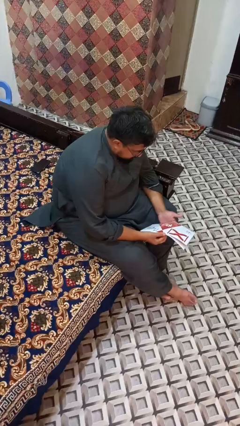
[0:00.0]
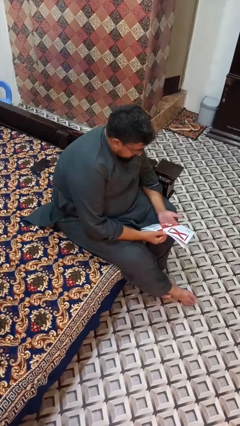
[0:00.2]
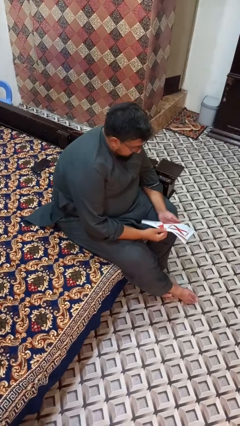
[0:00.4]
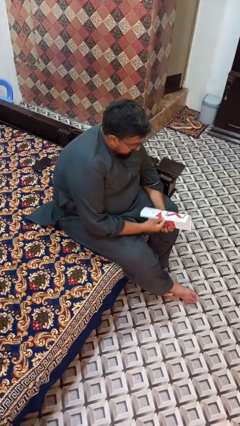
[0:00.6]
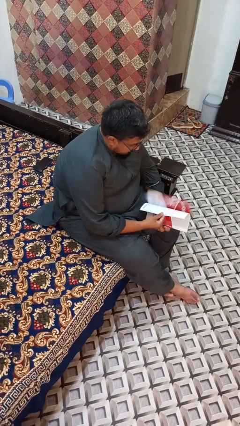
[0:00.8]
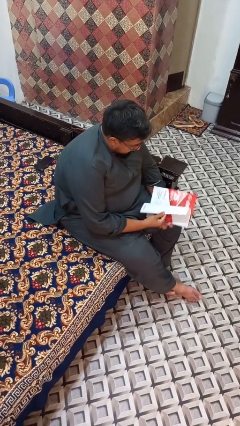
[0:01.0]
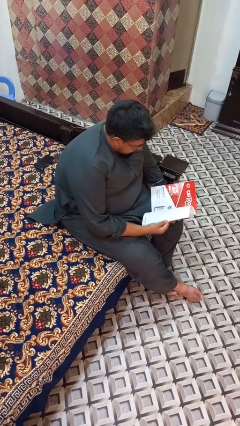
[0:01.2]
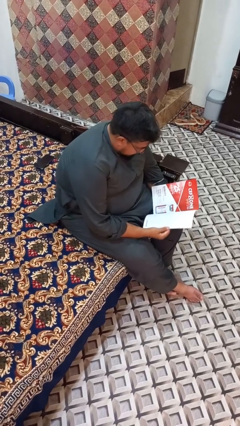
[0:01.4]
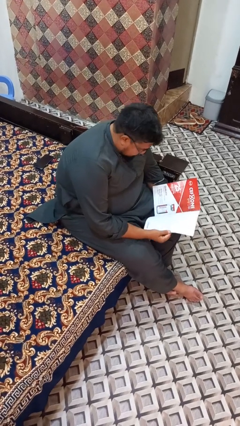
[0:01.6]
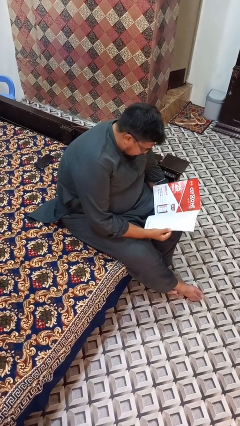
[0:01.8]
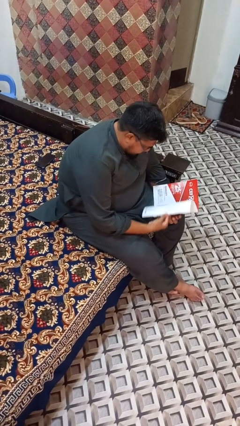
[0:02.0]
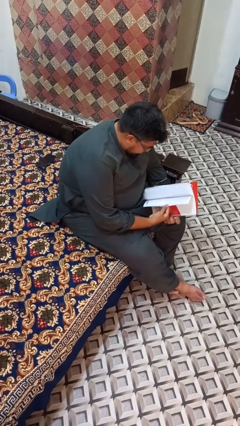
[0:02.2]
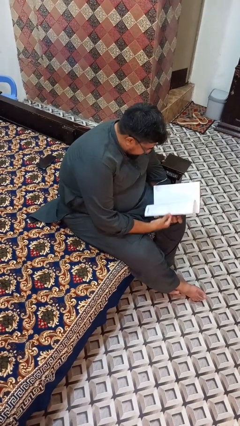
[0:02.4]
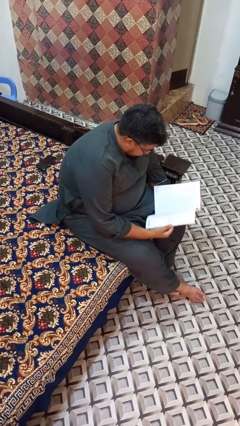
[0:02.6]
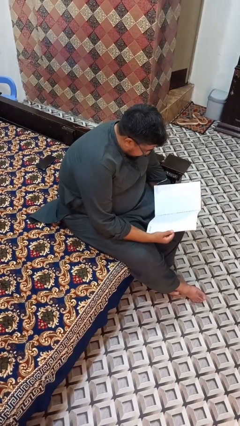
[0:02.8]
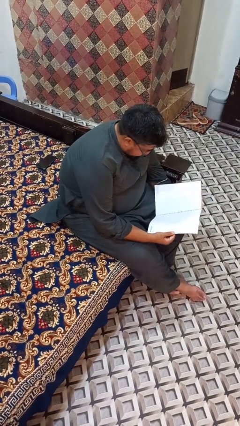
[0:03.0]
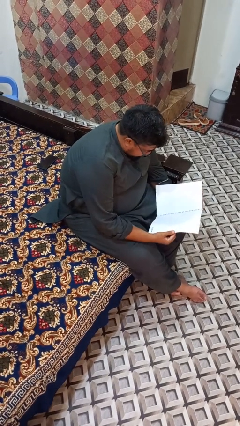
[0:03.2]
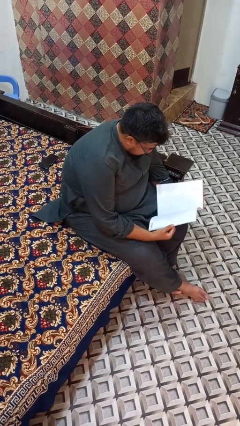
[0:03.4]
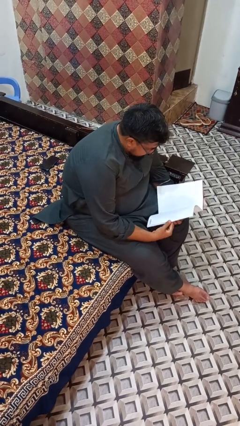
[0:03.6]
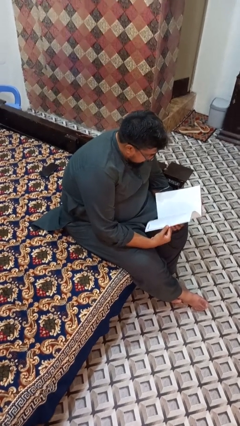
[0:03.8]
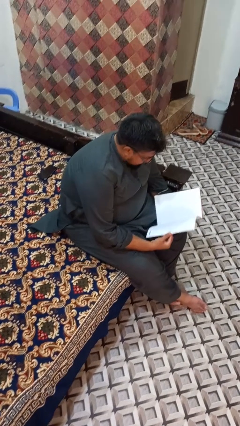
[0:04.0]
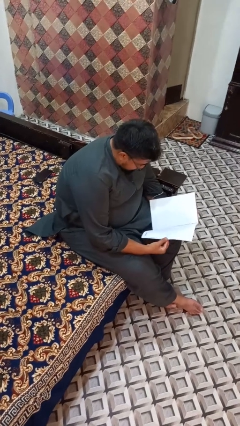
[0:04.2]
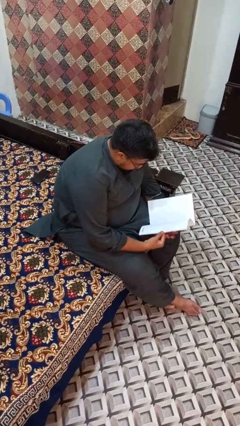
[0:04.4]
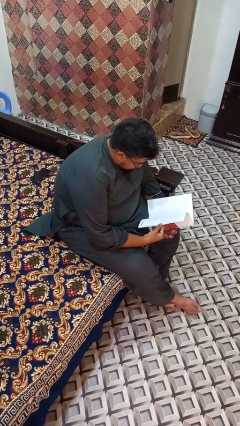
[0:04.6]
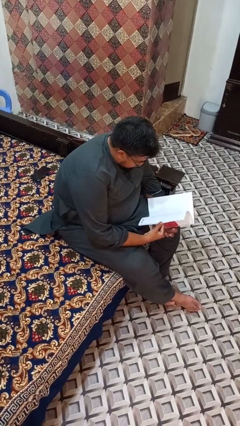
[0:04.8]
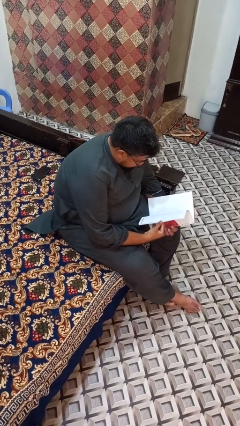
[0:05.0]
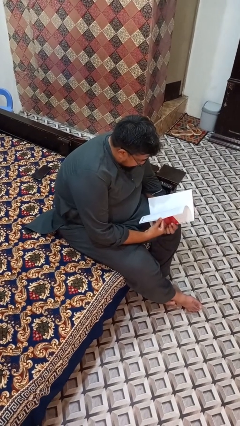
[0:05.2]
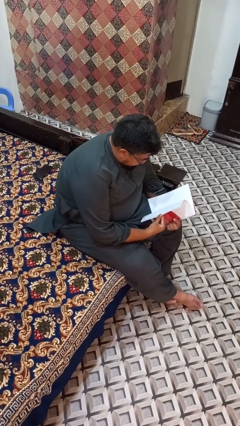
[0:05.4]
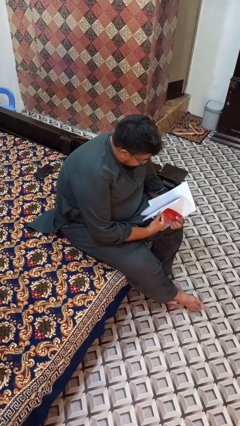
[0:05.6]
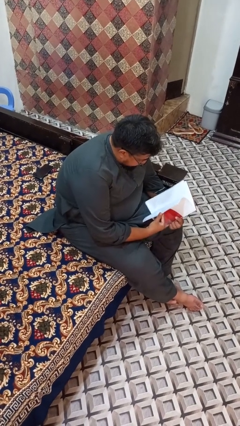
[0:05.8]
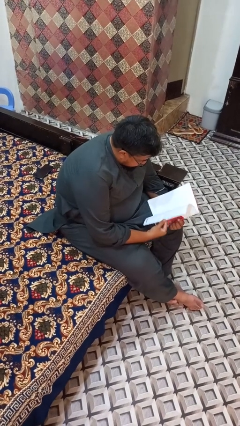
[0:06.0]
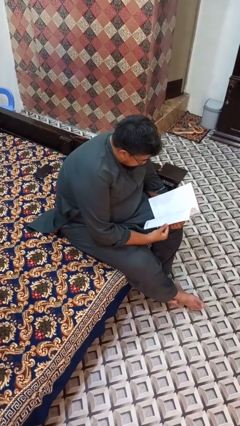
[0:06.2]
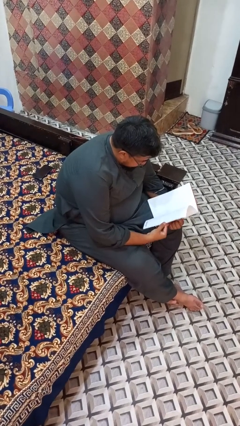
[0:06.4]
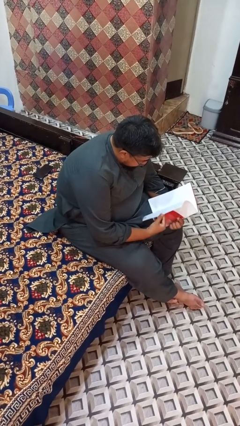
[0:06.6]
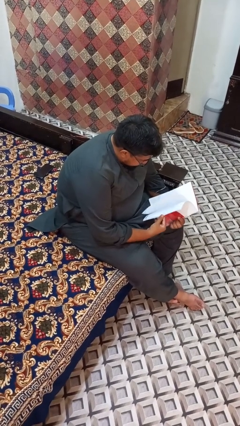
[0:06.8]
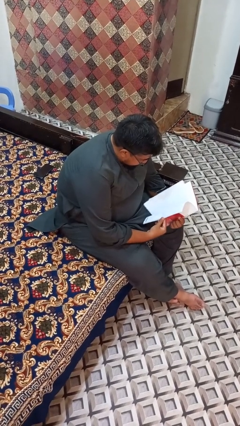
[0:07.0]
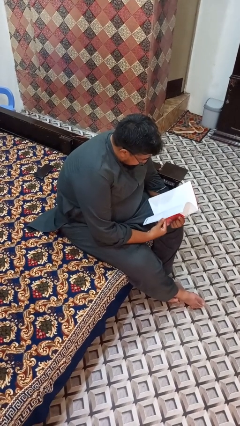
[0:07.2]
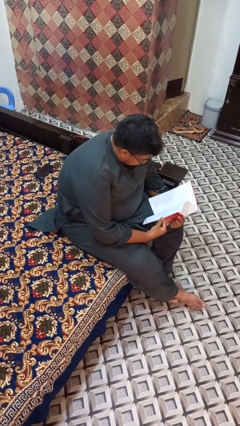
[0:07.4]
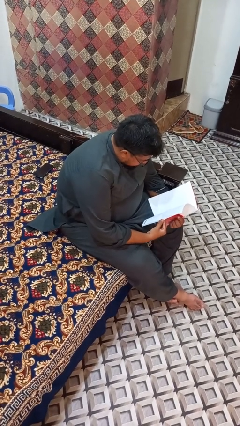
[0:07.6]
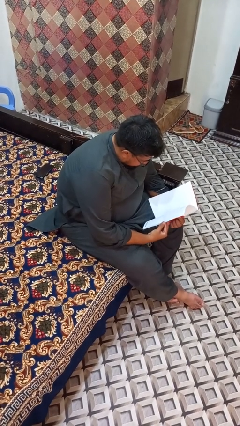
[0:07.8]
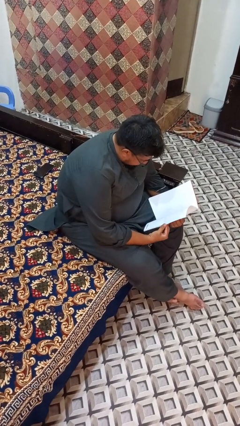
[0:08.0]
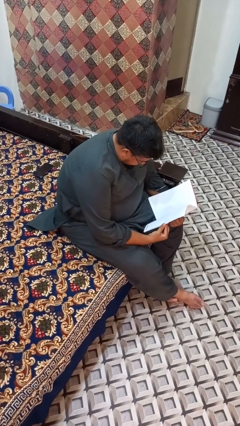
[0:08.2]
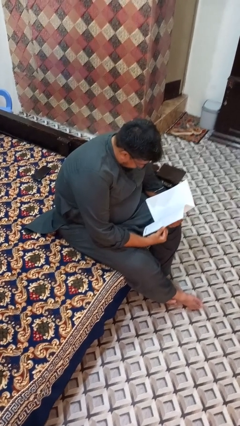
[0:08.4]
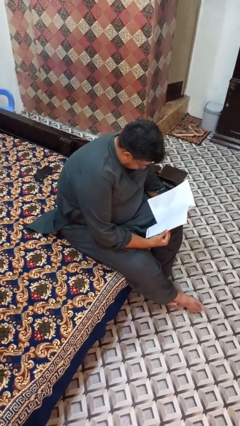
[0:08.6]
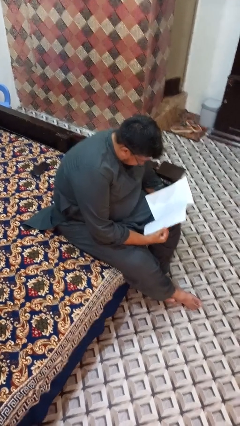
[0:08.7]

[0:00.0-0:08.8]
person reads magazine

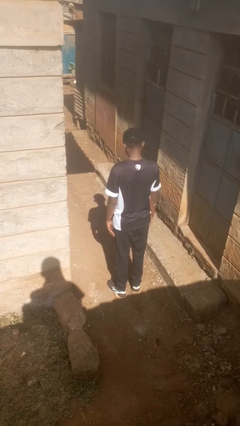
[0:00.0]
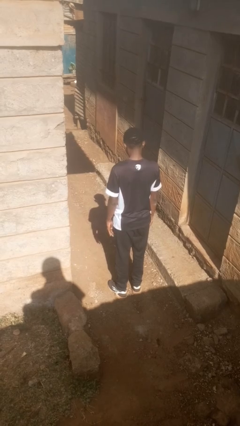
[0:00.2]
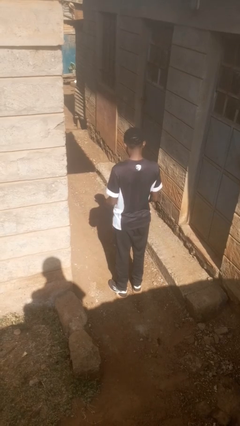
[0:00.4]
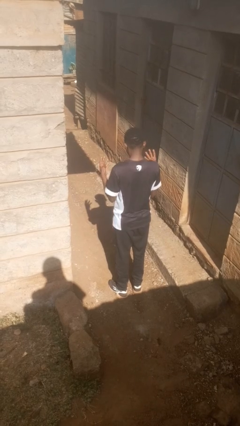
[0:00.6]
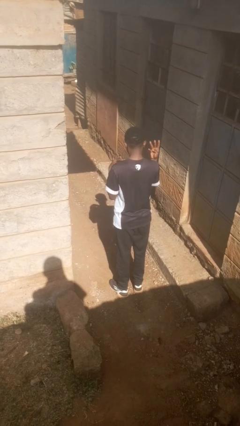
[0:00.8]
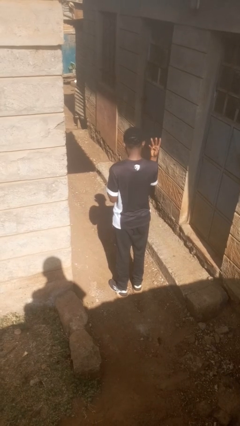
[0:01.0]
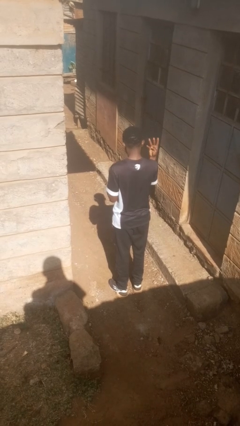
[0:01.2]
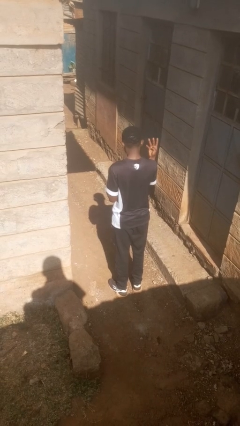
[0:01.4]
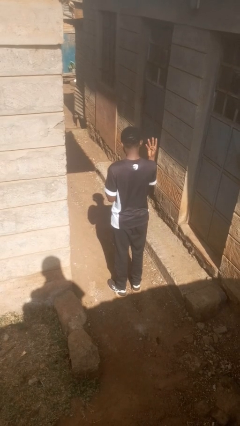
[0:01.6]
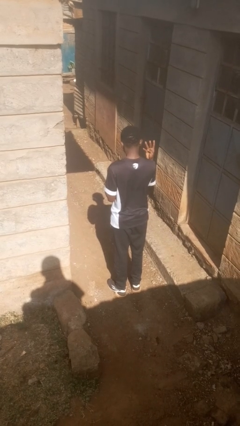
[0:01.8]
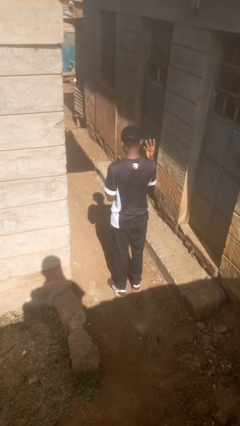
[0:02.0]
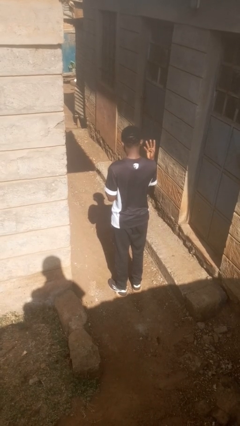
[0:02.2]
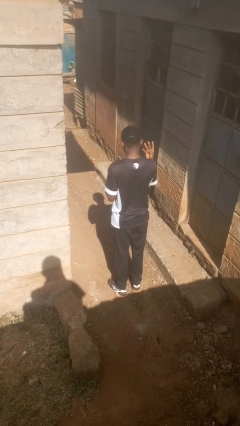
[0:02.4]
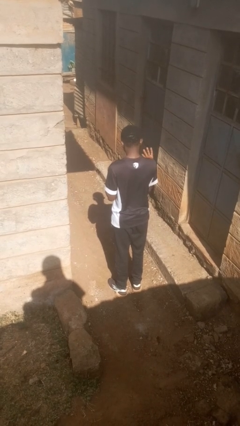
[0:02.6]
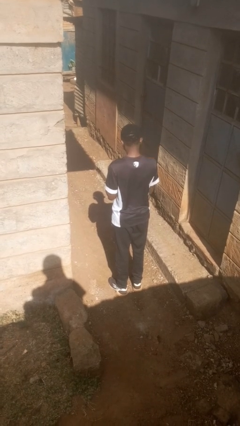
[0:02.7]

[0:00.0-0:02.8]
person gestures number four

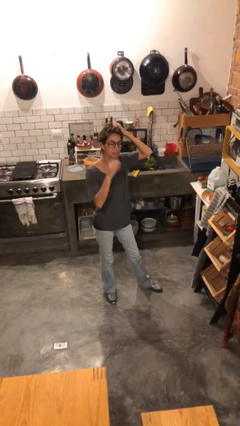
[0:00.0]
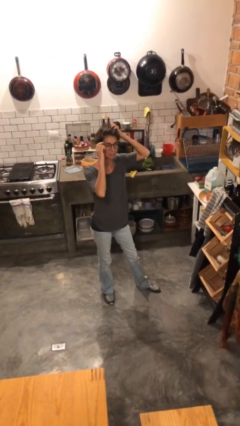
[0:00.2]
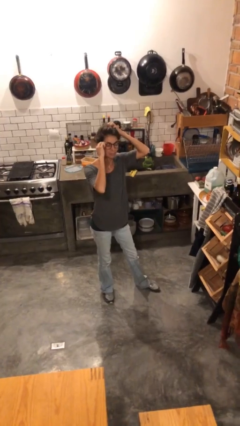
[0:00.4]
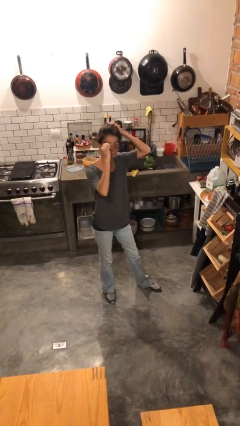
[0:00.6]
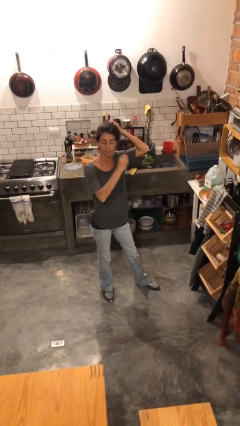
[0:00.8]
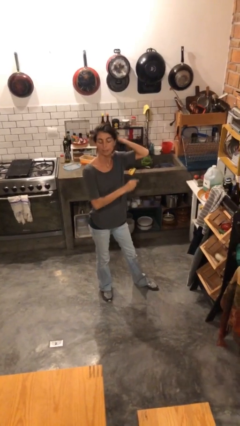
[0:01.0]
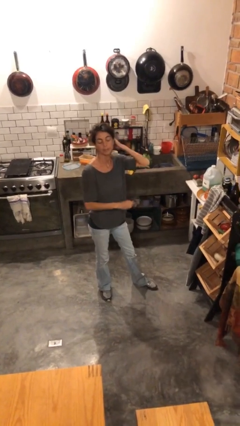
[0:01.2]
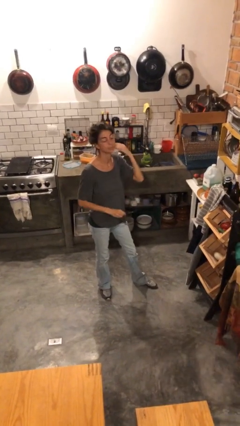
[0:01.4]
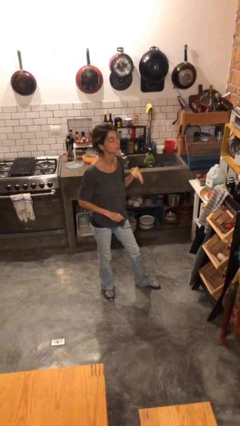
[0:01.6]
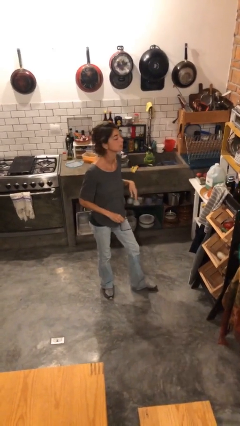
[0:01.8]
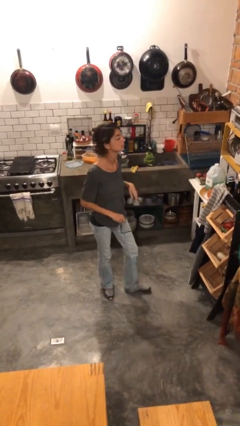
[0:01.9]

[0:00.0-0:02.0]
person takes off glasses

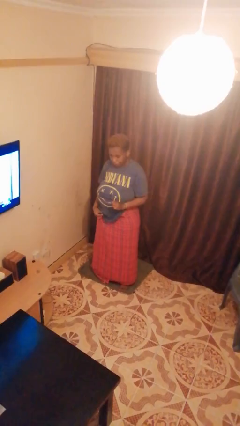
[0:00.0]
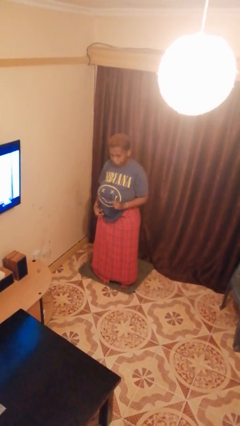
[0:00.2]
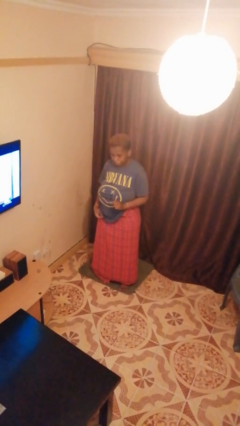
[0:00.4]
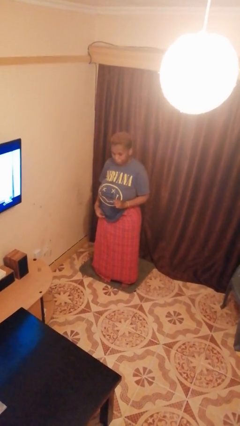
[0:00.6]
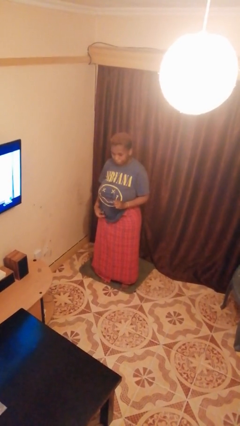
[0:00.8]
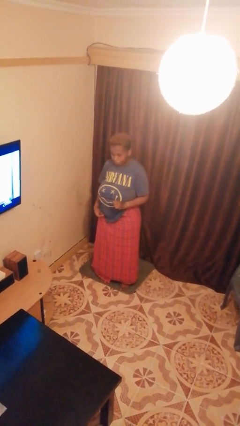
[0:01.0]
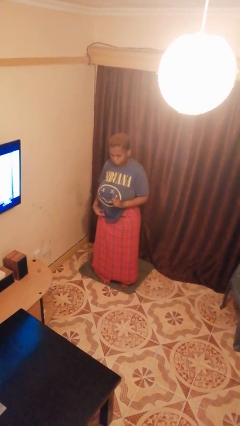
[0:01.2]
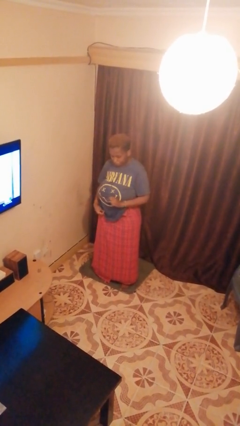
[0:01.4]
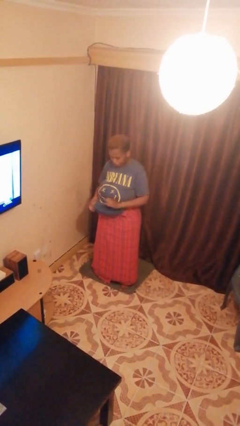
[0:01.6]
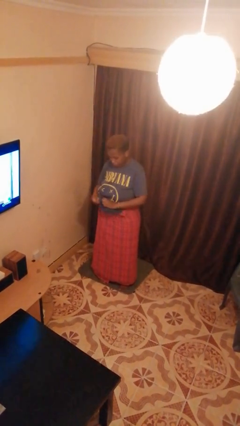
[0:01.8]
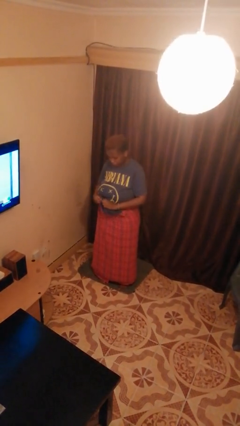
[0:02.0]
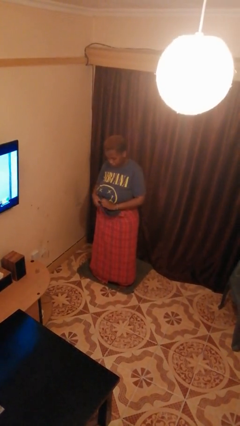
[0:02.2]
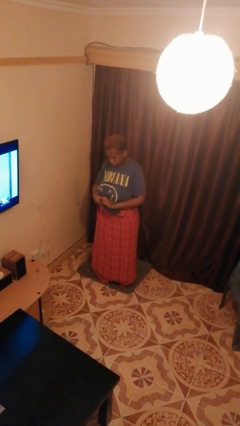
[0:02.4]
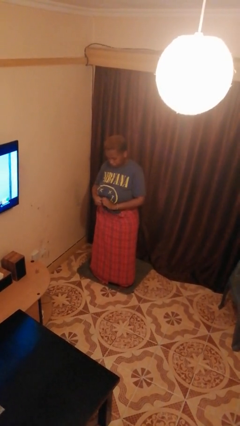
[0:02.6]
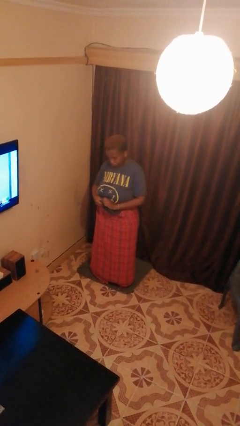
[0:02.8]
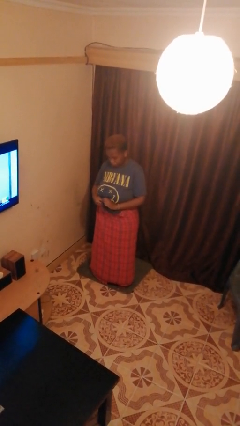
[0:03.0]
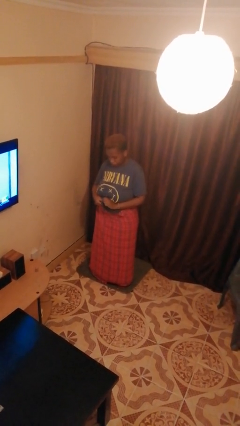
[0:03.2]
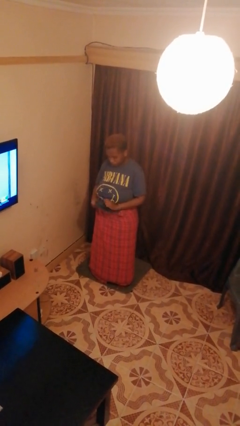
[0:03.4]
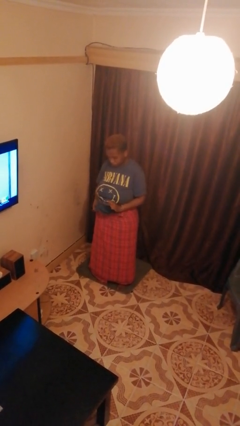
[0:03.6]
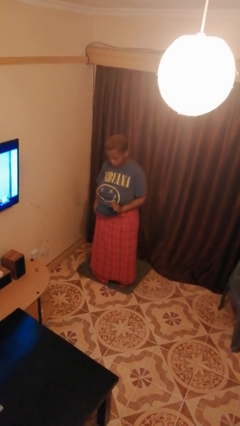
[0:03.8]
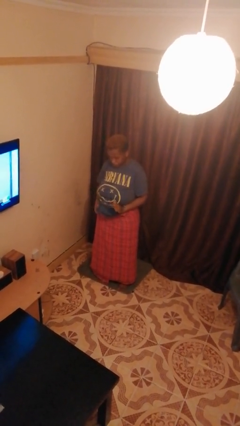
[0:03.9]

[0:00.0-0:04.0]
person cleans eyeglasses

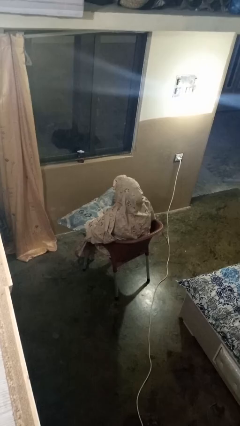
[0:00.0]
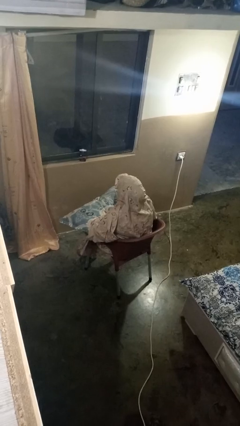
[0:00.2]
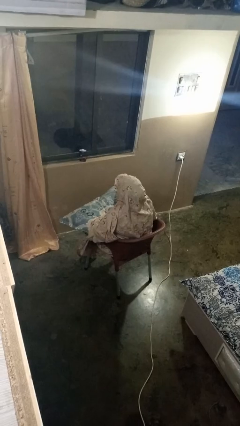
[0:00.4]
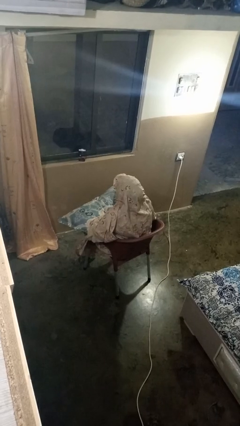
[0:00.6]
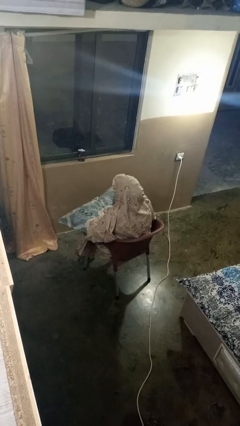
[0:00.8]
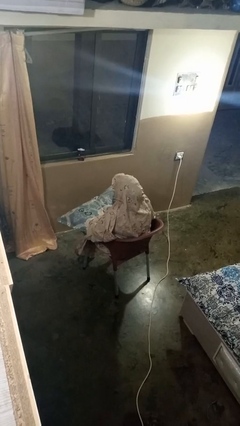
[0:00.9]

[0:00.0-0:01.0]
person waves hand over object
